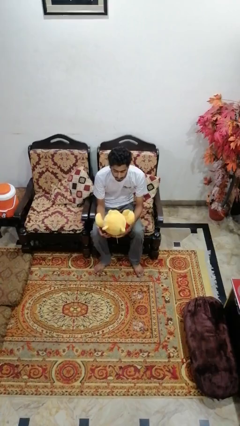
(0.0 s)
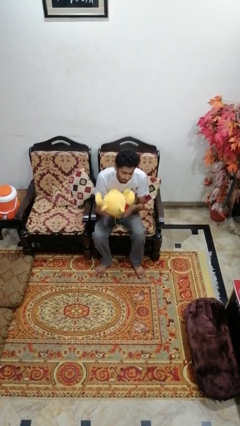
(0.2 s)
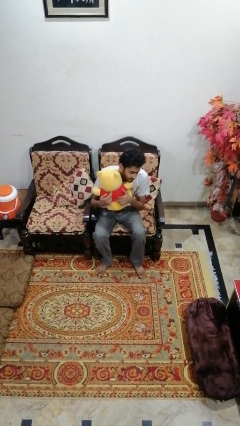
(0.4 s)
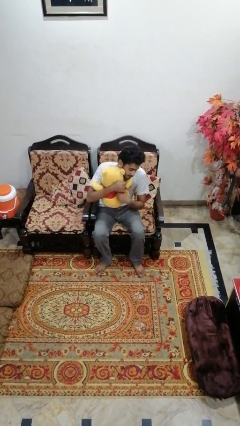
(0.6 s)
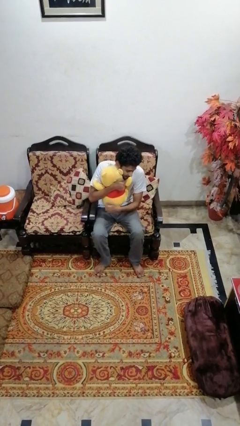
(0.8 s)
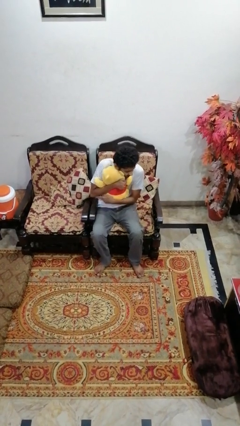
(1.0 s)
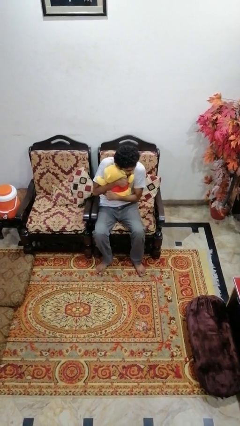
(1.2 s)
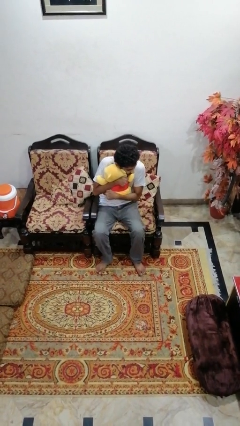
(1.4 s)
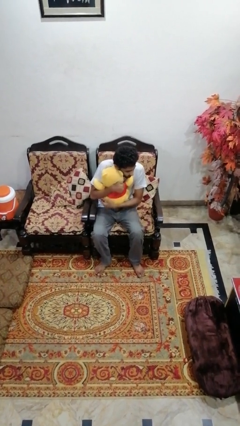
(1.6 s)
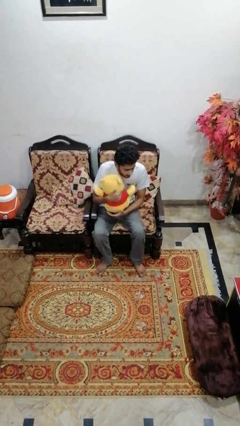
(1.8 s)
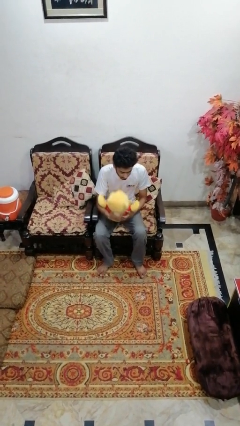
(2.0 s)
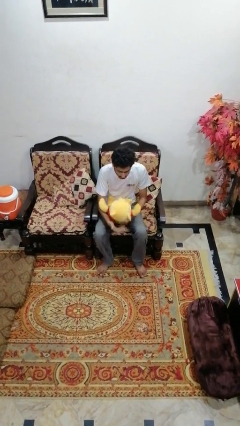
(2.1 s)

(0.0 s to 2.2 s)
person hugs stuffed animal

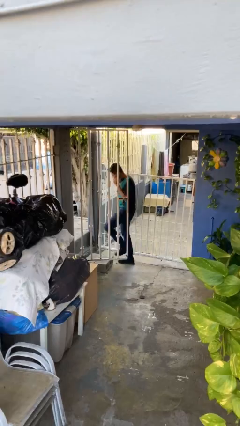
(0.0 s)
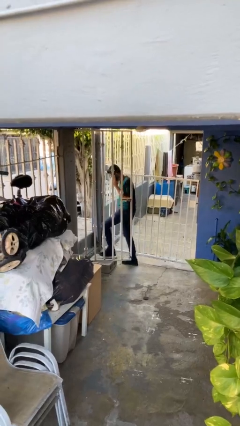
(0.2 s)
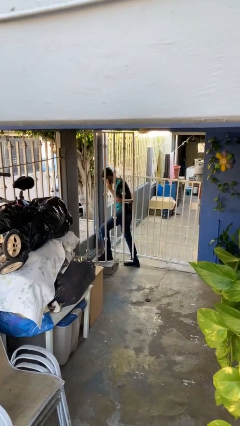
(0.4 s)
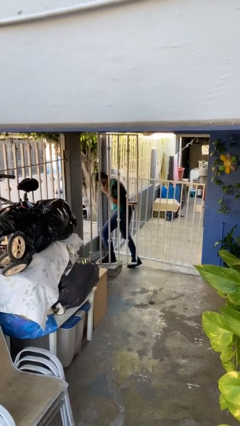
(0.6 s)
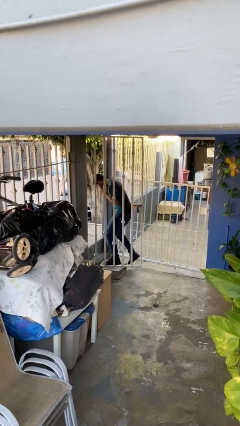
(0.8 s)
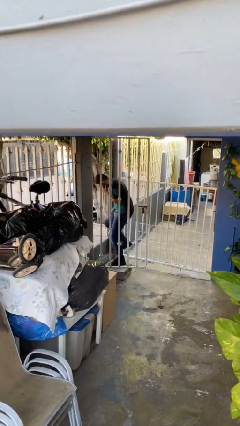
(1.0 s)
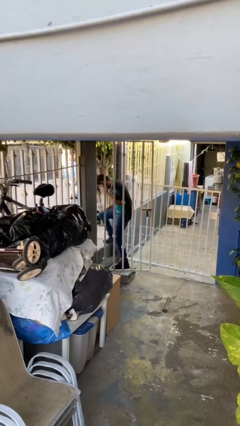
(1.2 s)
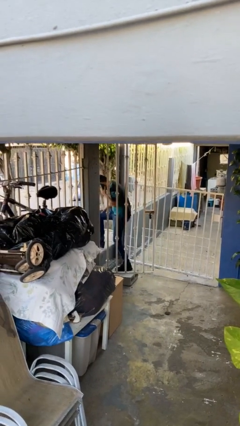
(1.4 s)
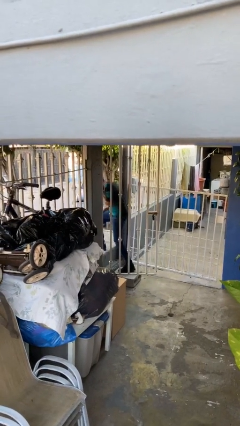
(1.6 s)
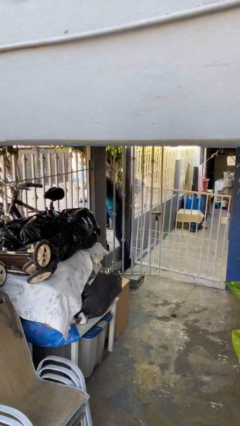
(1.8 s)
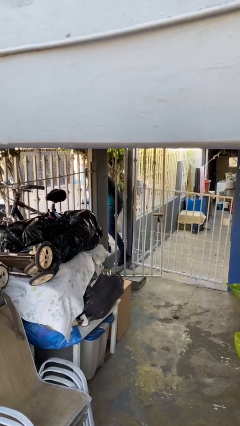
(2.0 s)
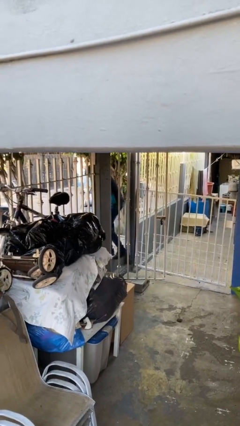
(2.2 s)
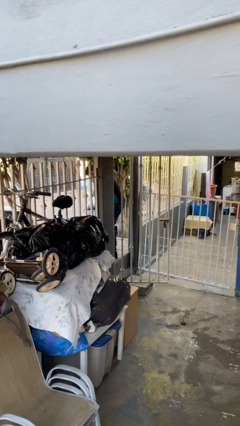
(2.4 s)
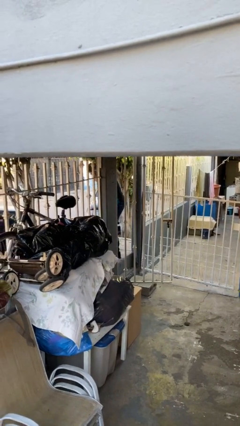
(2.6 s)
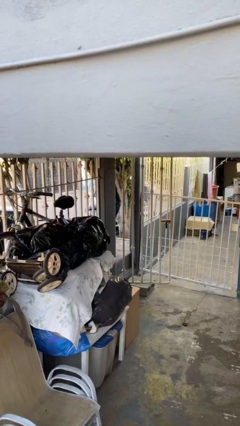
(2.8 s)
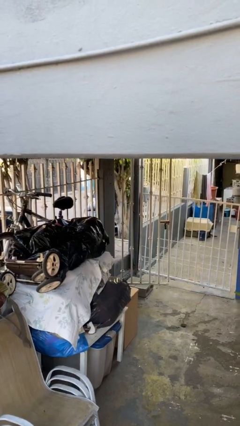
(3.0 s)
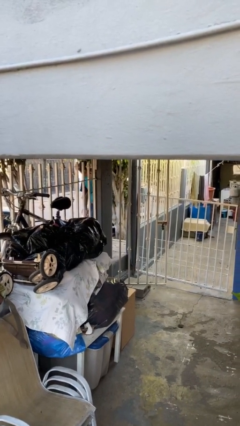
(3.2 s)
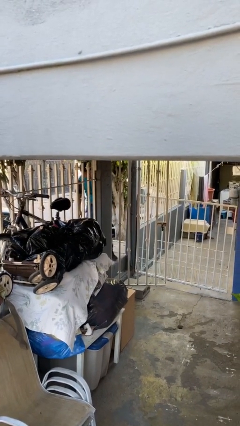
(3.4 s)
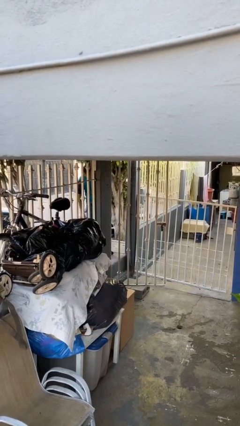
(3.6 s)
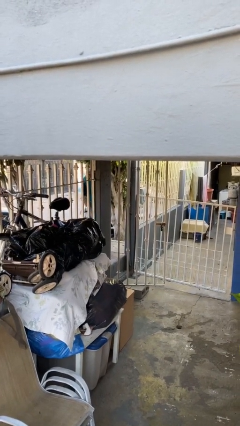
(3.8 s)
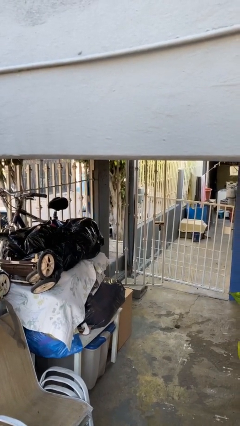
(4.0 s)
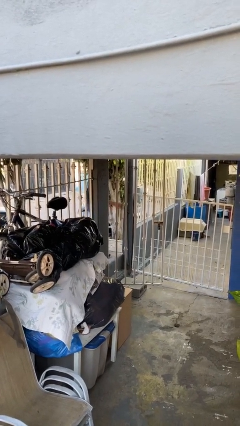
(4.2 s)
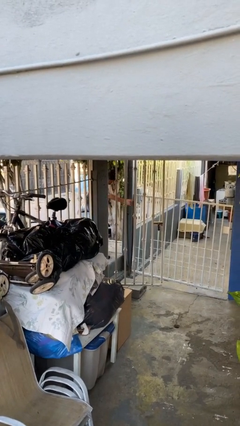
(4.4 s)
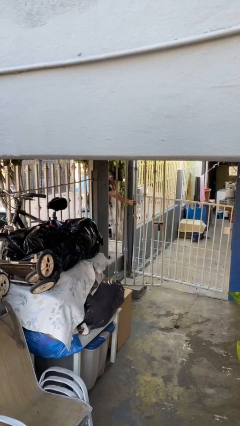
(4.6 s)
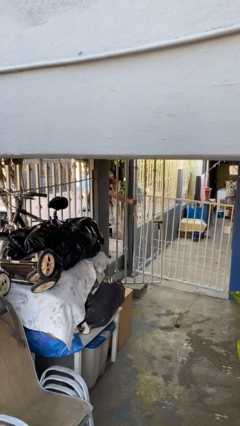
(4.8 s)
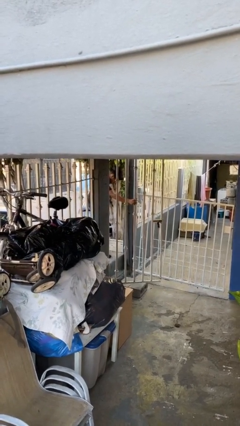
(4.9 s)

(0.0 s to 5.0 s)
person exits scene through structure

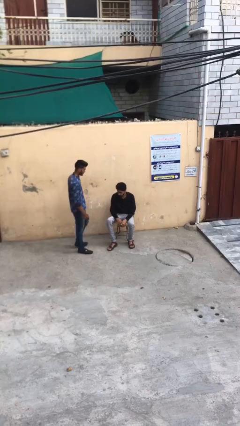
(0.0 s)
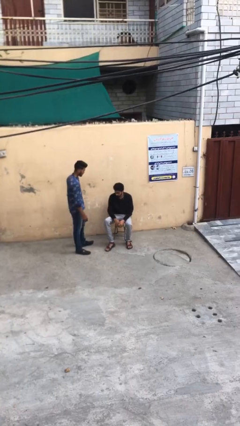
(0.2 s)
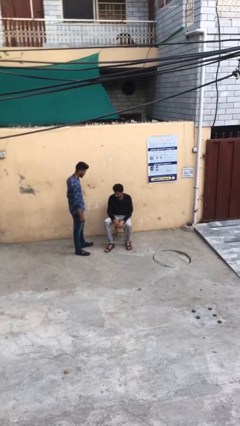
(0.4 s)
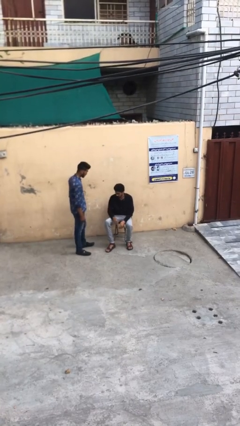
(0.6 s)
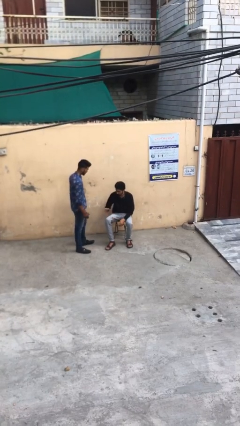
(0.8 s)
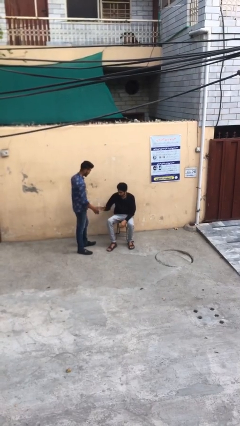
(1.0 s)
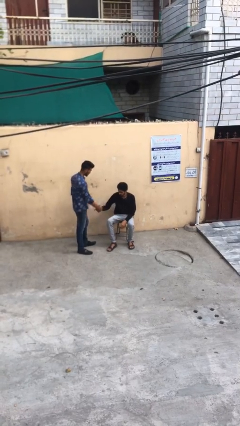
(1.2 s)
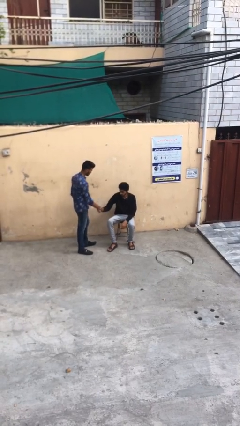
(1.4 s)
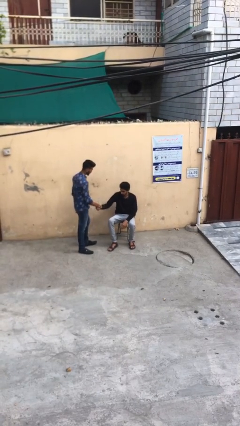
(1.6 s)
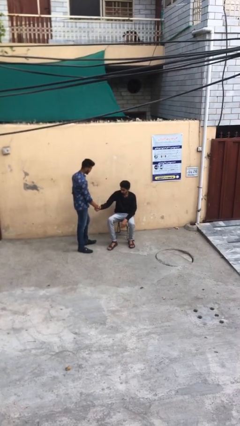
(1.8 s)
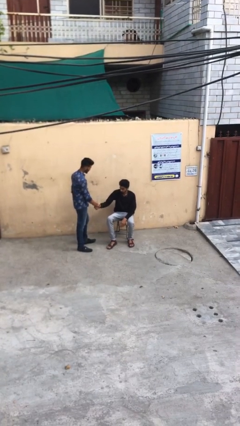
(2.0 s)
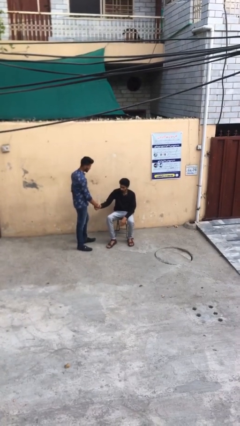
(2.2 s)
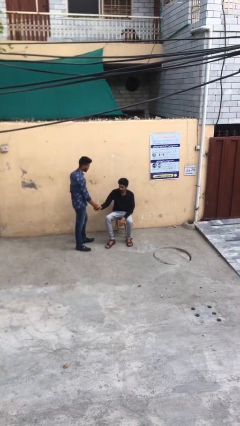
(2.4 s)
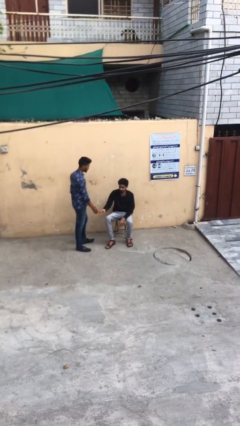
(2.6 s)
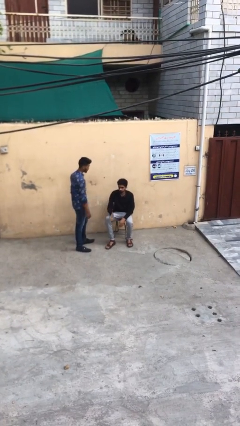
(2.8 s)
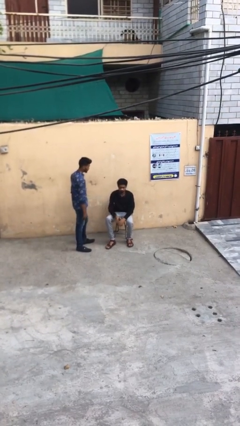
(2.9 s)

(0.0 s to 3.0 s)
person shakes hand

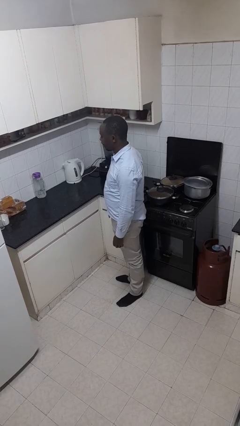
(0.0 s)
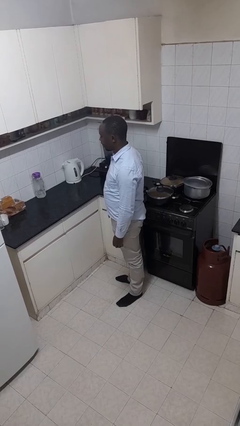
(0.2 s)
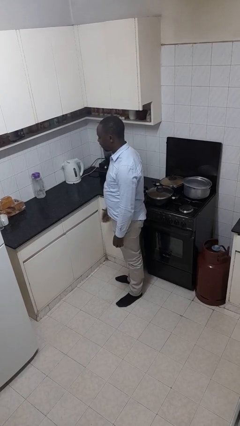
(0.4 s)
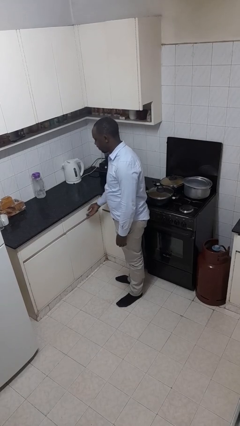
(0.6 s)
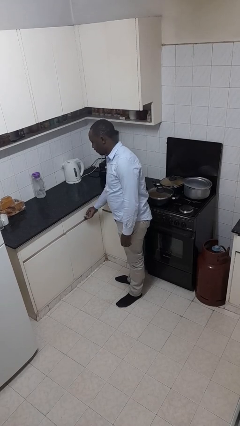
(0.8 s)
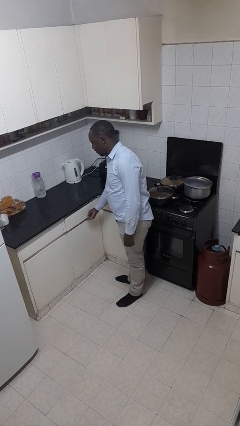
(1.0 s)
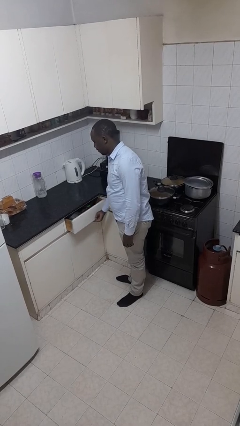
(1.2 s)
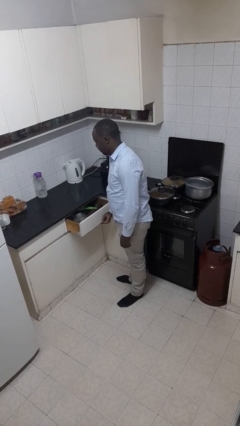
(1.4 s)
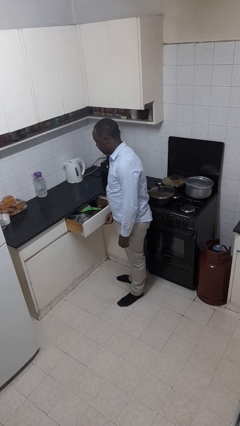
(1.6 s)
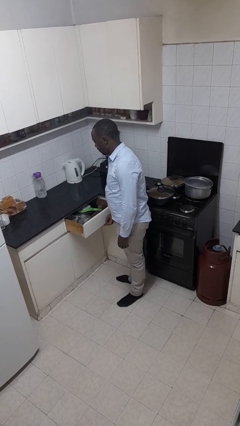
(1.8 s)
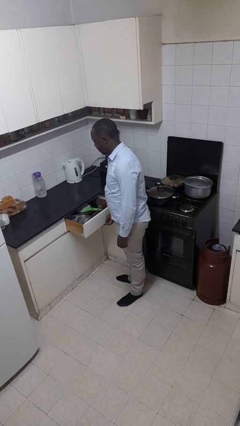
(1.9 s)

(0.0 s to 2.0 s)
person opens kitchen drawer

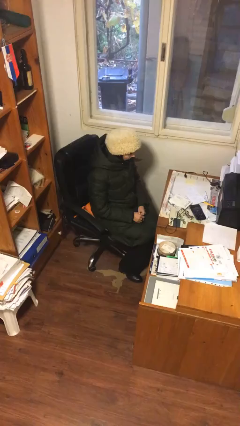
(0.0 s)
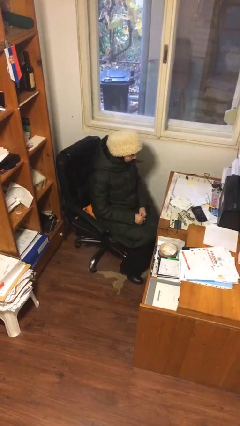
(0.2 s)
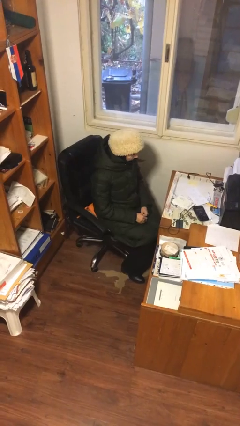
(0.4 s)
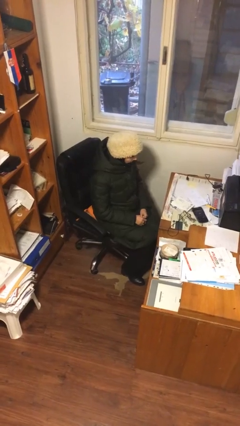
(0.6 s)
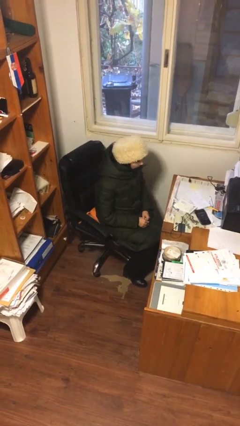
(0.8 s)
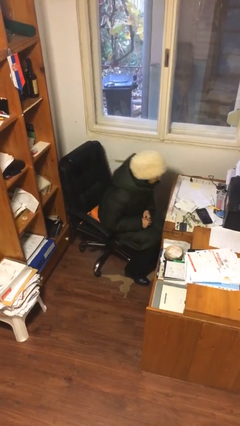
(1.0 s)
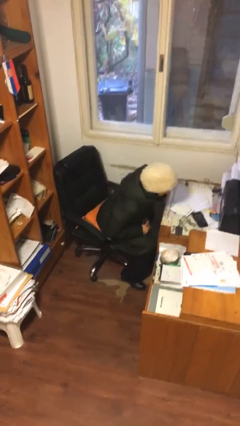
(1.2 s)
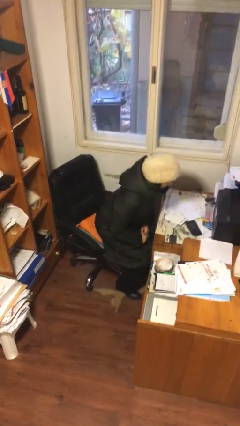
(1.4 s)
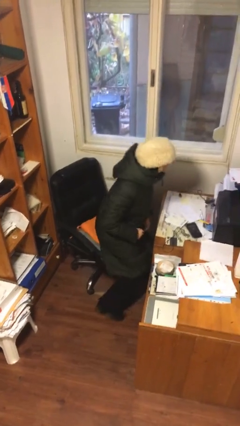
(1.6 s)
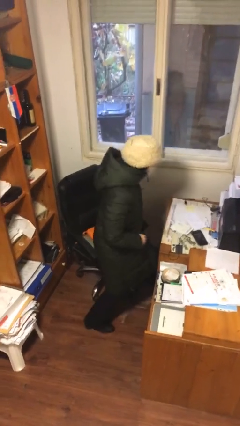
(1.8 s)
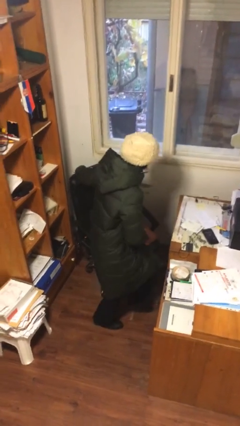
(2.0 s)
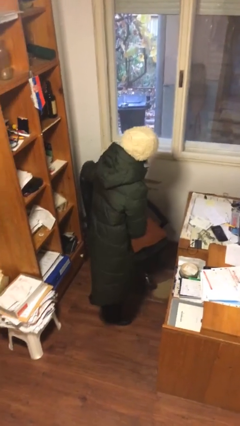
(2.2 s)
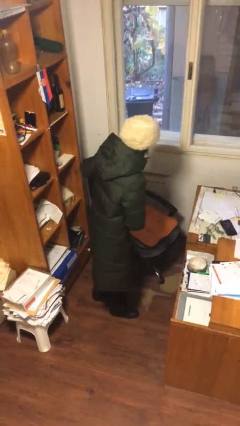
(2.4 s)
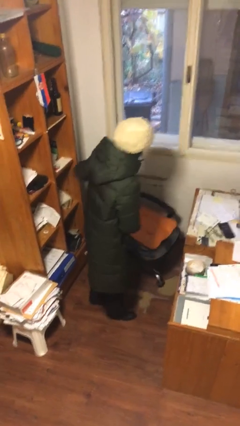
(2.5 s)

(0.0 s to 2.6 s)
person stands up

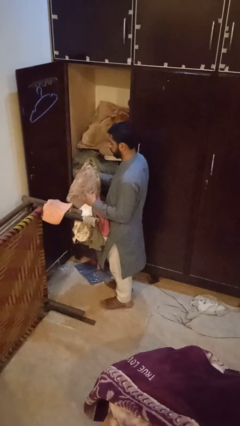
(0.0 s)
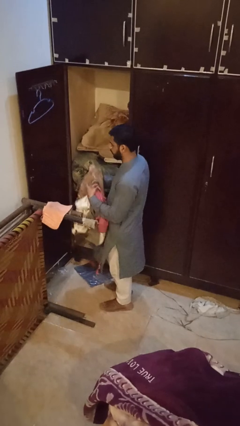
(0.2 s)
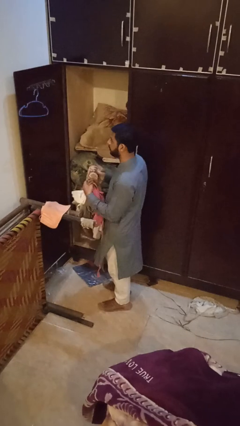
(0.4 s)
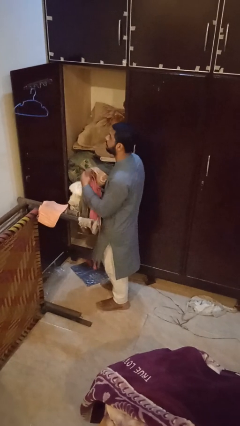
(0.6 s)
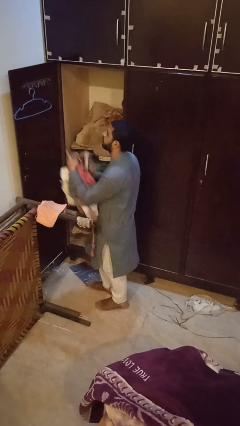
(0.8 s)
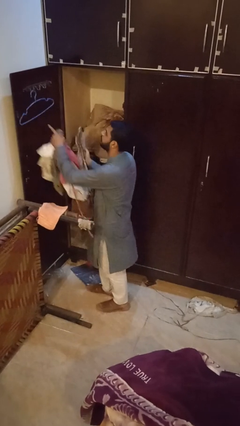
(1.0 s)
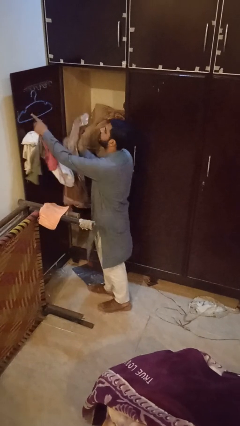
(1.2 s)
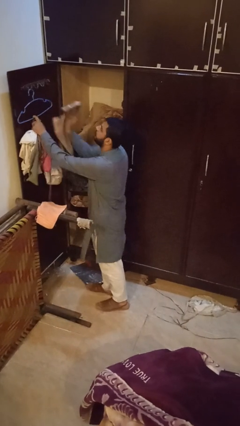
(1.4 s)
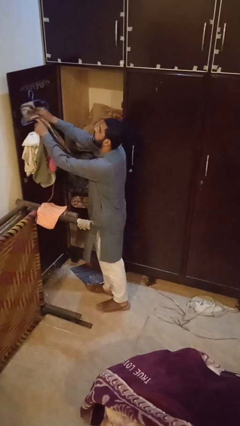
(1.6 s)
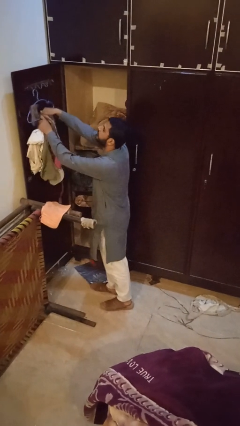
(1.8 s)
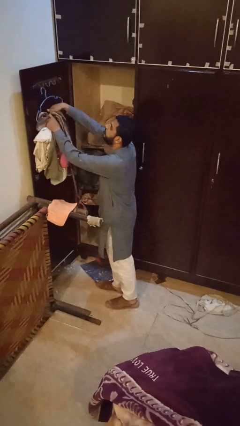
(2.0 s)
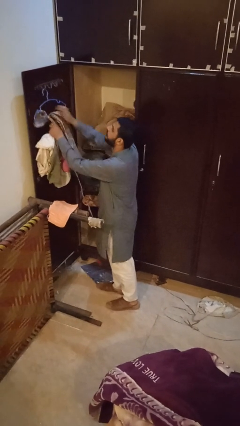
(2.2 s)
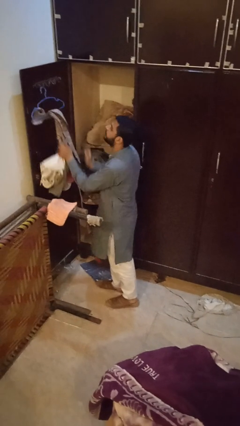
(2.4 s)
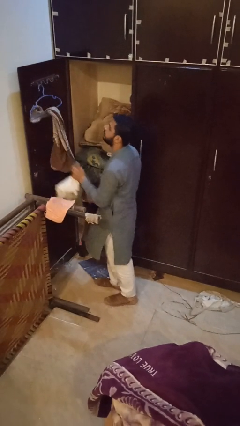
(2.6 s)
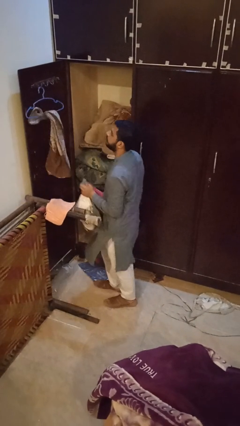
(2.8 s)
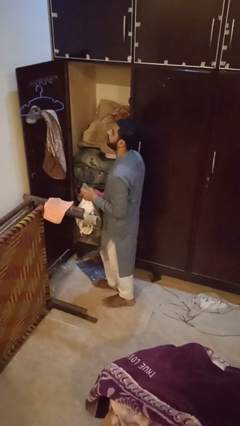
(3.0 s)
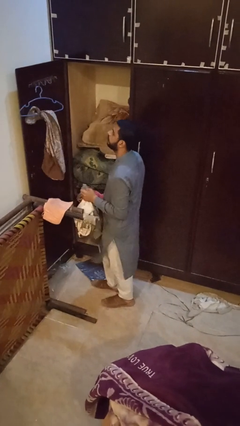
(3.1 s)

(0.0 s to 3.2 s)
person puts clothes into closet
